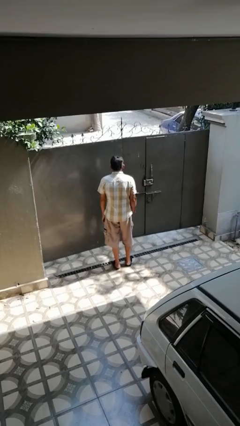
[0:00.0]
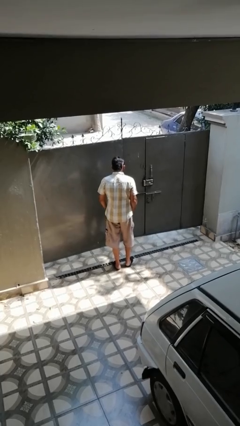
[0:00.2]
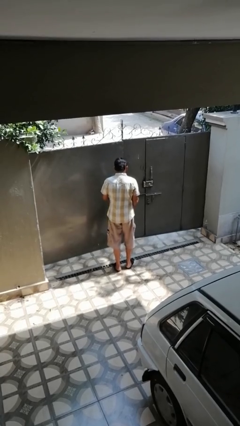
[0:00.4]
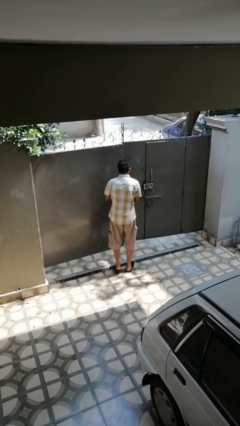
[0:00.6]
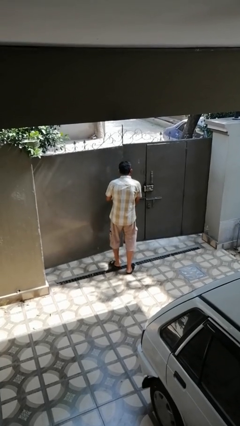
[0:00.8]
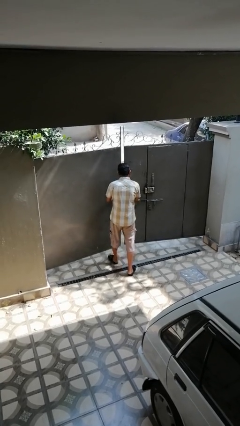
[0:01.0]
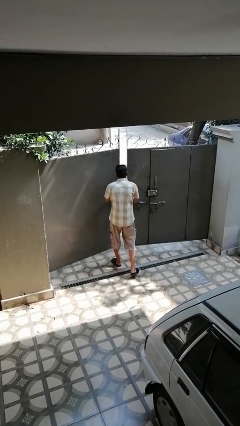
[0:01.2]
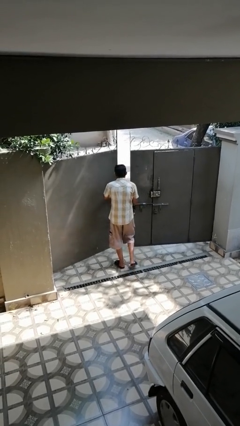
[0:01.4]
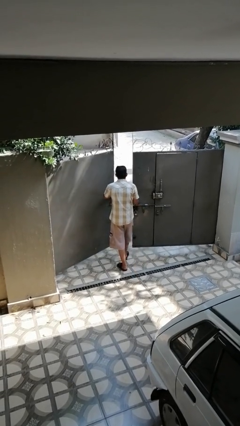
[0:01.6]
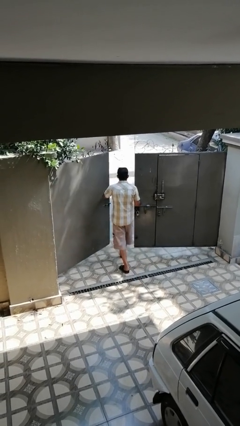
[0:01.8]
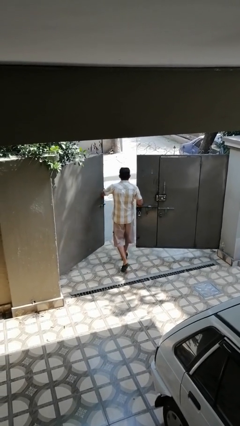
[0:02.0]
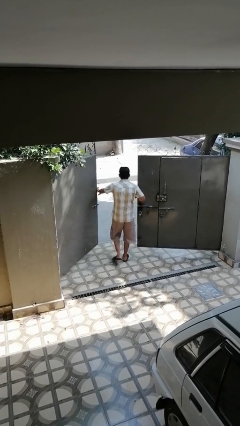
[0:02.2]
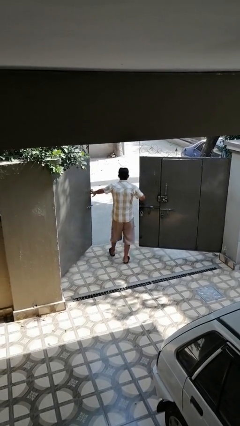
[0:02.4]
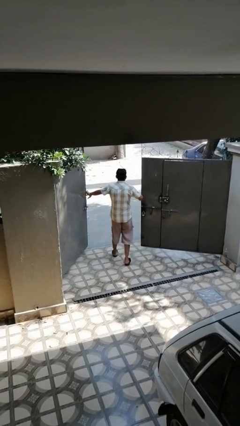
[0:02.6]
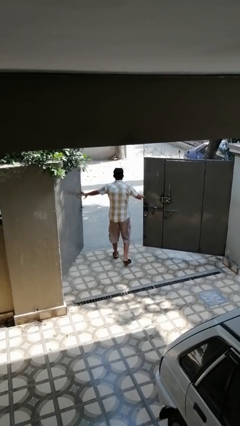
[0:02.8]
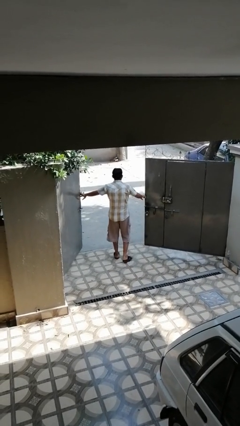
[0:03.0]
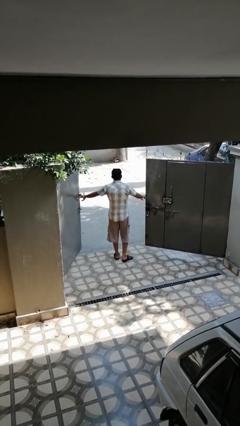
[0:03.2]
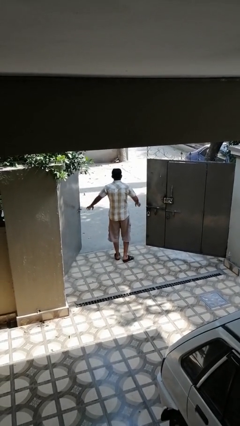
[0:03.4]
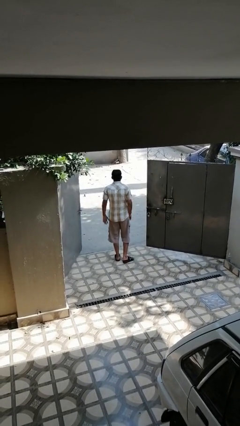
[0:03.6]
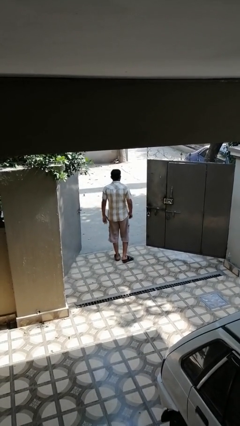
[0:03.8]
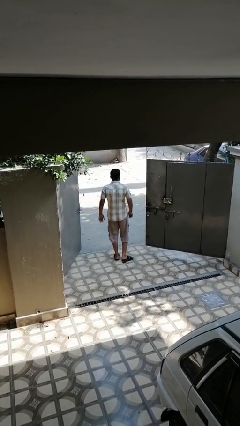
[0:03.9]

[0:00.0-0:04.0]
person opens gate

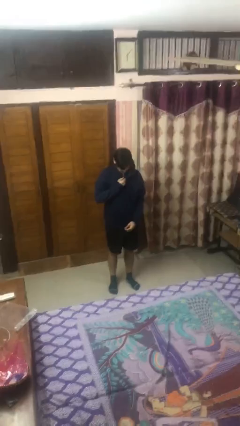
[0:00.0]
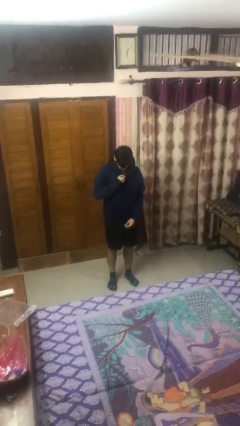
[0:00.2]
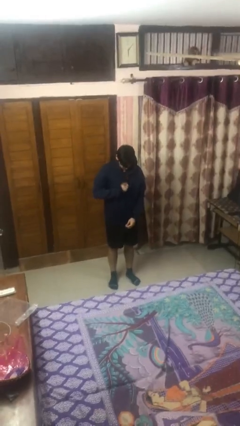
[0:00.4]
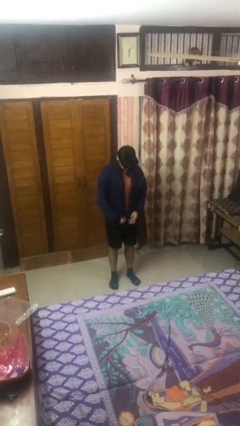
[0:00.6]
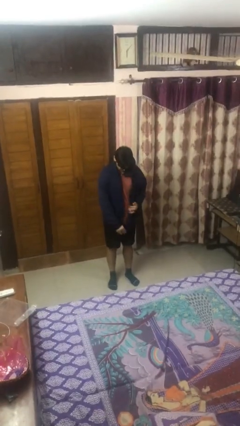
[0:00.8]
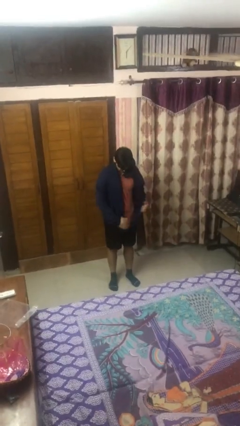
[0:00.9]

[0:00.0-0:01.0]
person unzips jacket

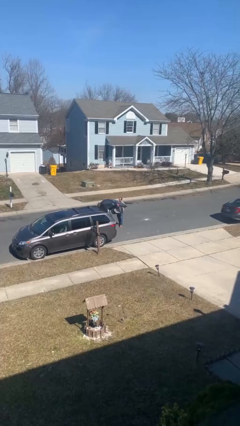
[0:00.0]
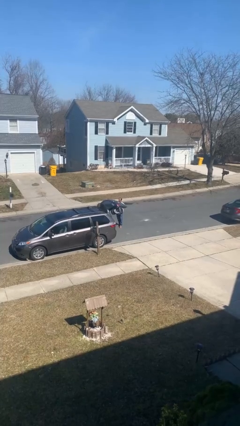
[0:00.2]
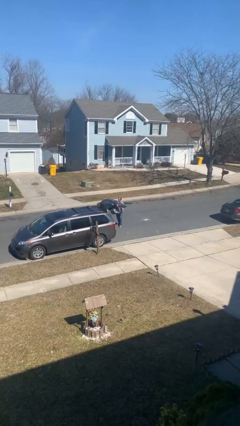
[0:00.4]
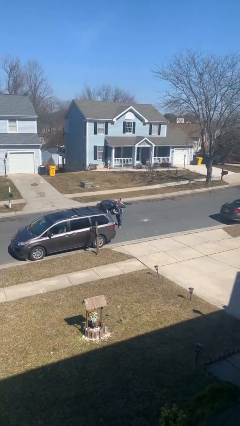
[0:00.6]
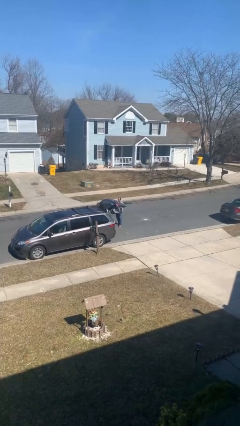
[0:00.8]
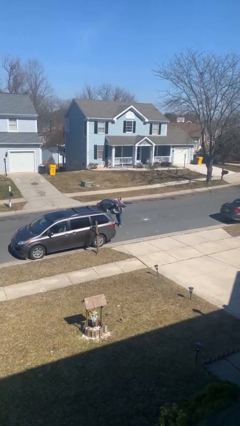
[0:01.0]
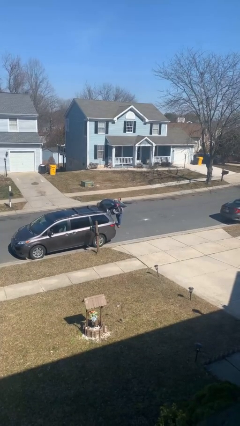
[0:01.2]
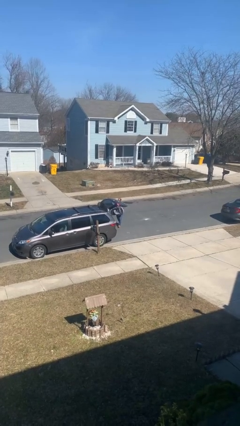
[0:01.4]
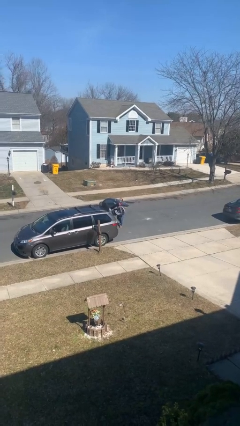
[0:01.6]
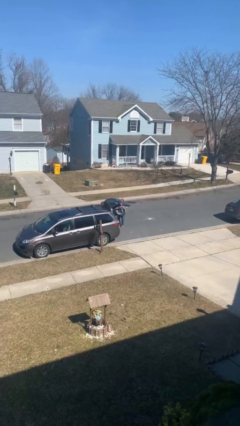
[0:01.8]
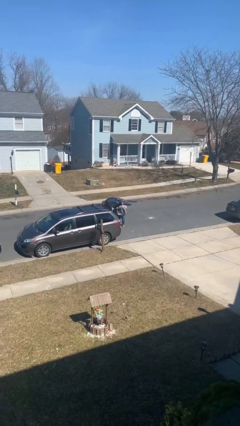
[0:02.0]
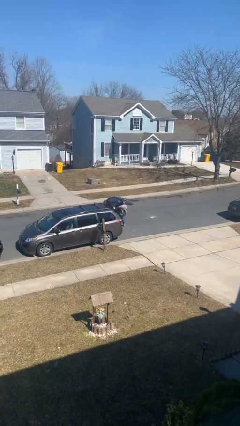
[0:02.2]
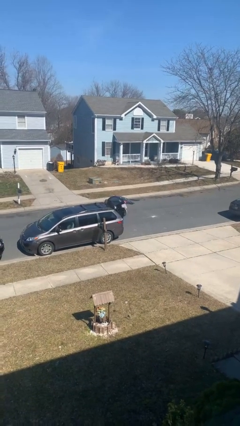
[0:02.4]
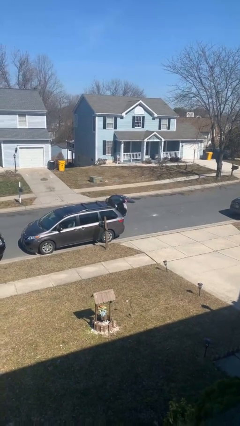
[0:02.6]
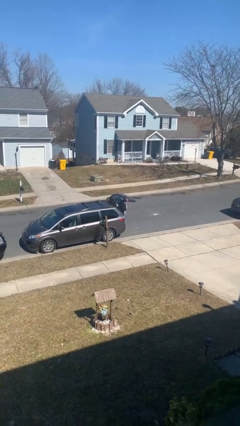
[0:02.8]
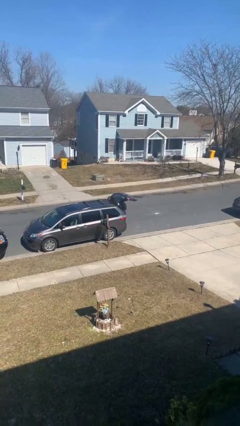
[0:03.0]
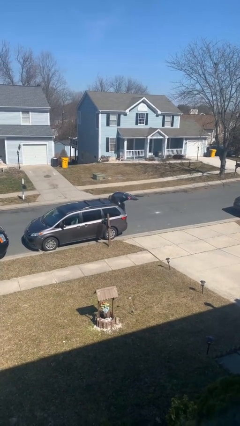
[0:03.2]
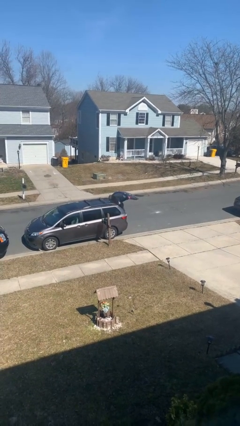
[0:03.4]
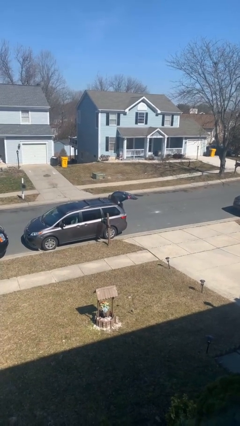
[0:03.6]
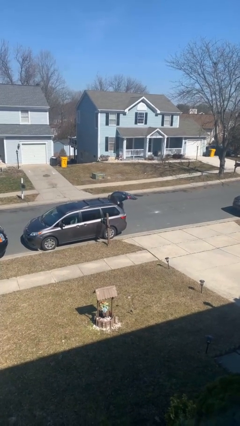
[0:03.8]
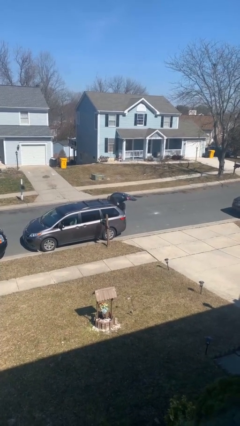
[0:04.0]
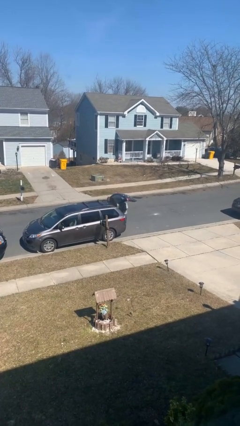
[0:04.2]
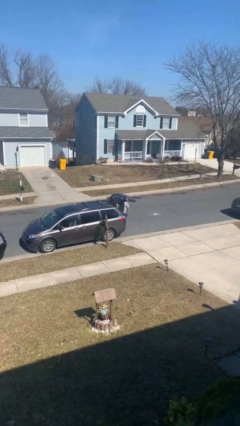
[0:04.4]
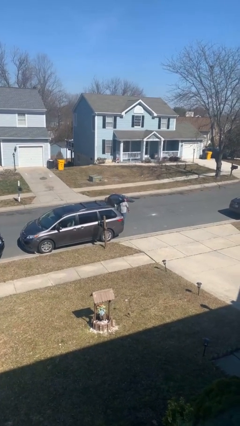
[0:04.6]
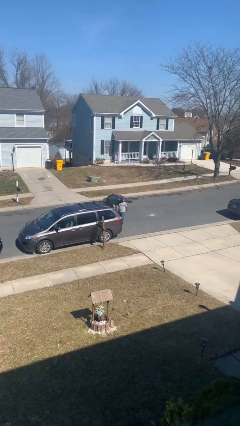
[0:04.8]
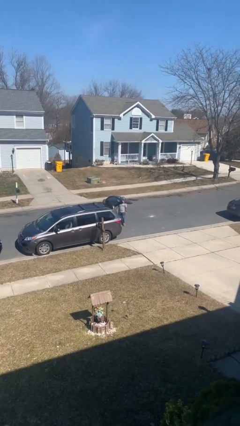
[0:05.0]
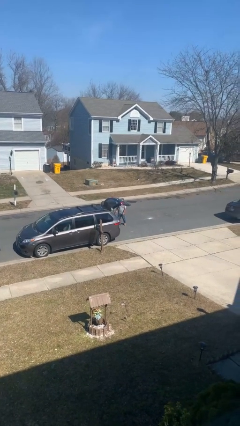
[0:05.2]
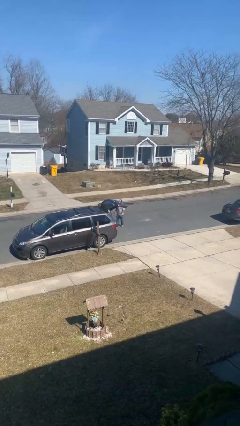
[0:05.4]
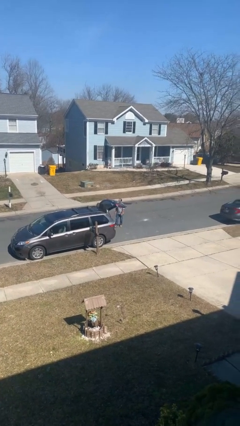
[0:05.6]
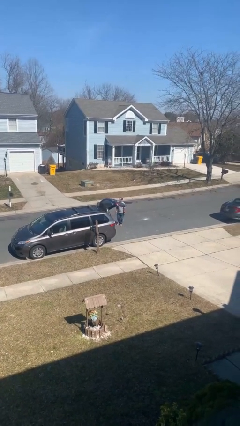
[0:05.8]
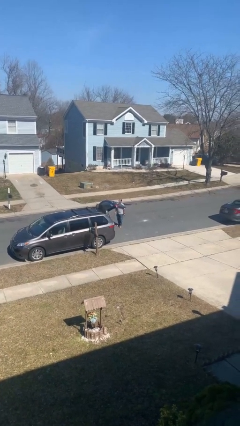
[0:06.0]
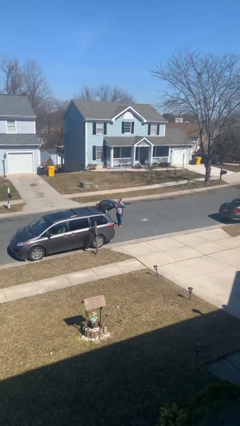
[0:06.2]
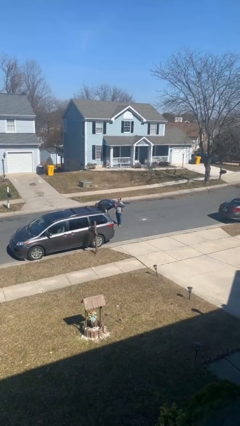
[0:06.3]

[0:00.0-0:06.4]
person loads car

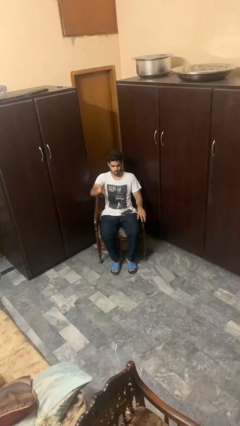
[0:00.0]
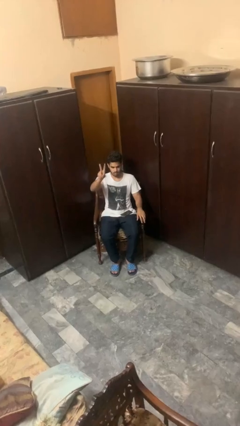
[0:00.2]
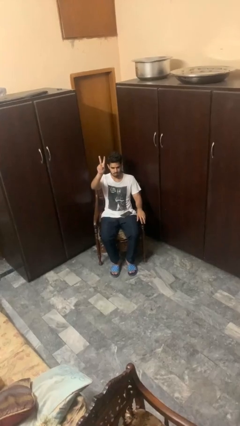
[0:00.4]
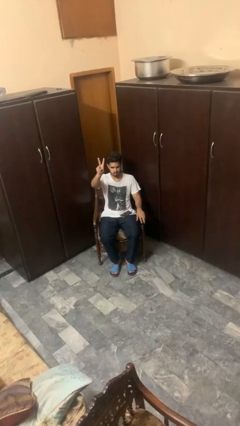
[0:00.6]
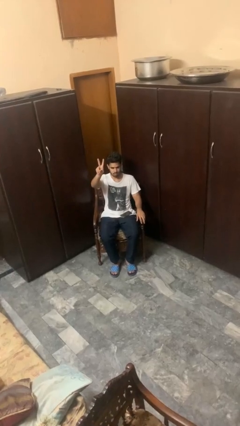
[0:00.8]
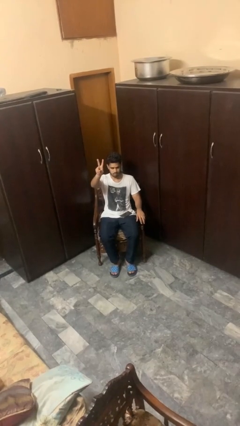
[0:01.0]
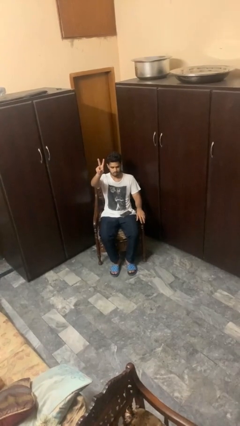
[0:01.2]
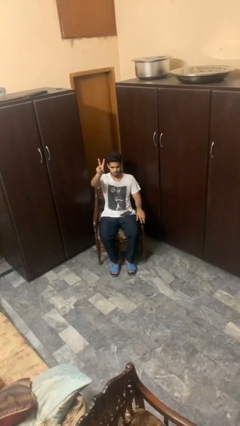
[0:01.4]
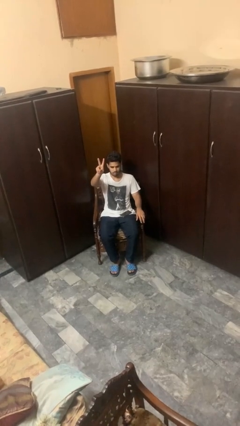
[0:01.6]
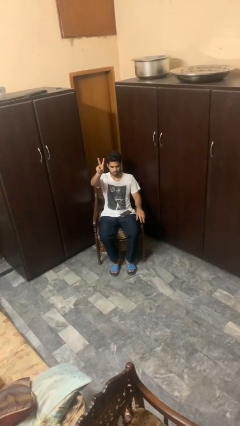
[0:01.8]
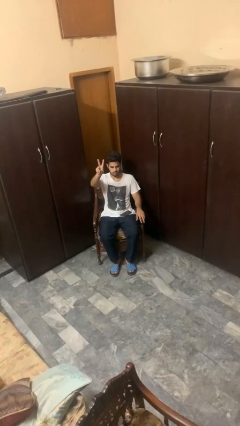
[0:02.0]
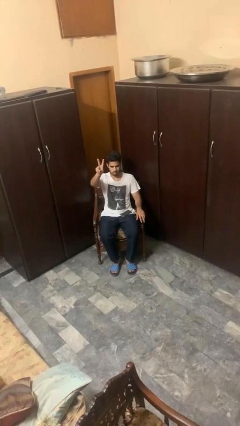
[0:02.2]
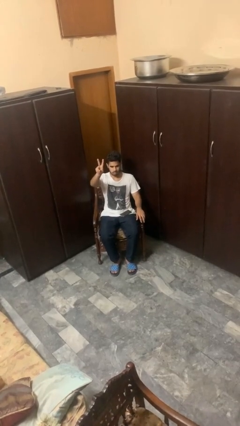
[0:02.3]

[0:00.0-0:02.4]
person gestures peace

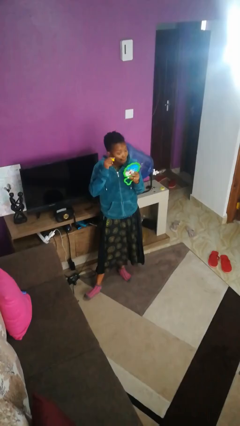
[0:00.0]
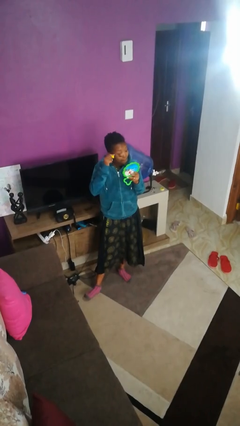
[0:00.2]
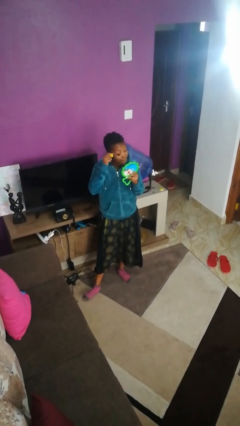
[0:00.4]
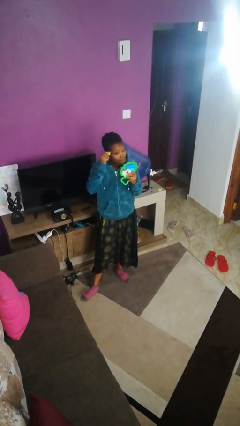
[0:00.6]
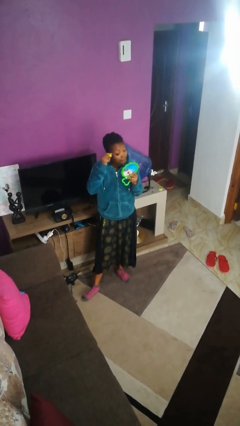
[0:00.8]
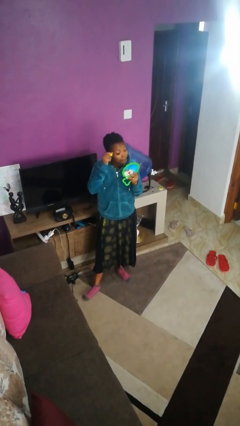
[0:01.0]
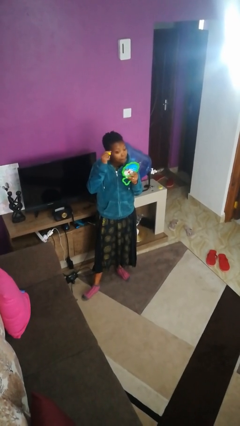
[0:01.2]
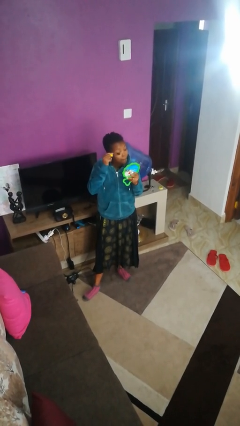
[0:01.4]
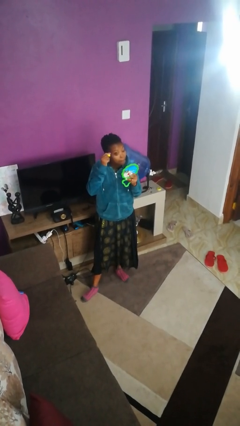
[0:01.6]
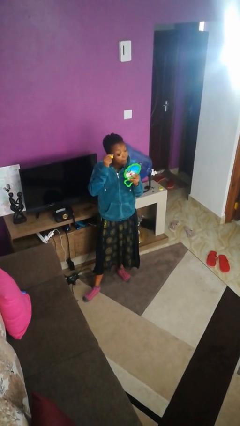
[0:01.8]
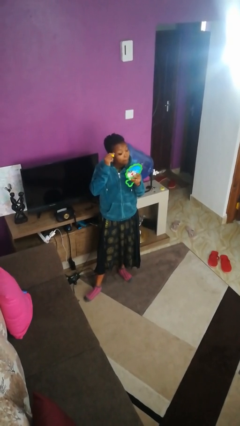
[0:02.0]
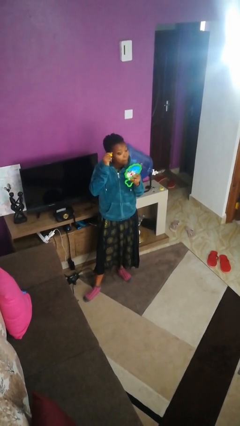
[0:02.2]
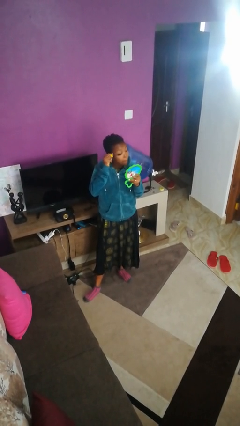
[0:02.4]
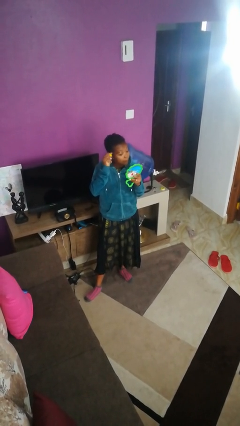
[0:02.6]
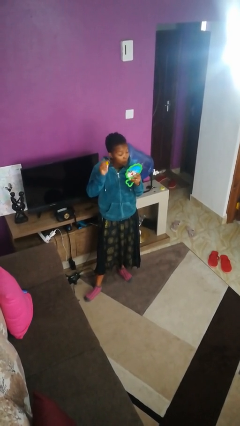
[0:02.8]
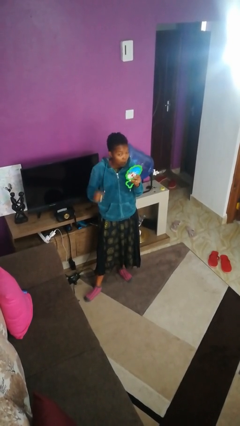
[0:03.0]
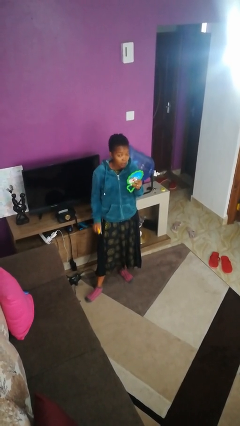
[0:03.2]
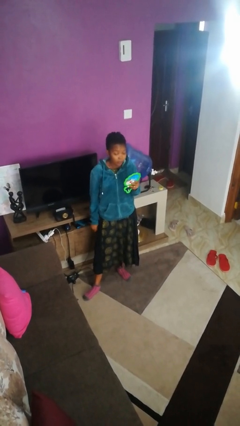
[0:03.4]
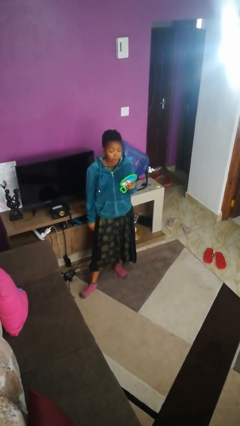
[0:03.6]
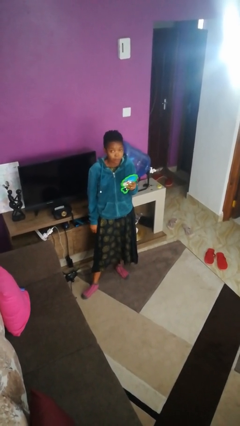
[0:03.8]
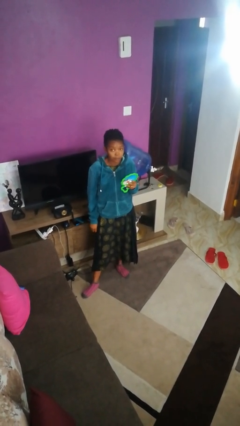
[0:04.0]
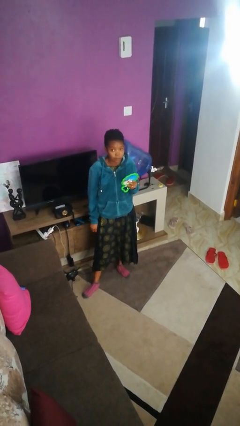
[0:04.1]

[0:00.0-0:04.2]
person applies eye makeup
